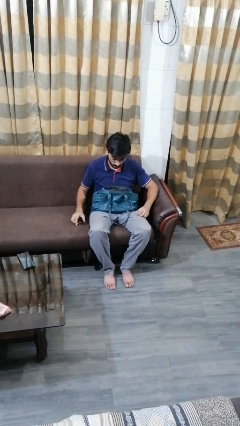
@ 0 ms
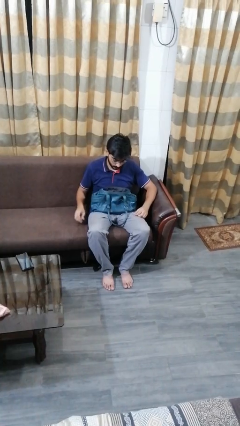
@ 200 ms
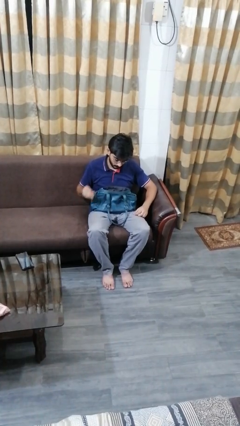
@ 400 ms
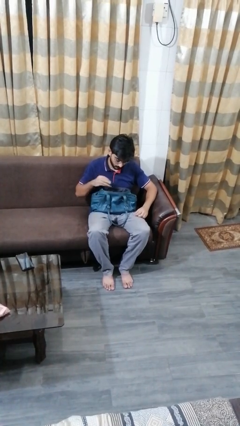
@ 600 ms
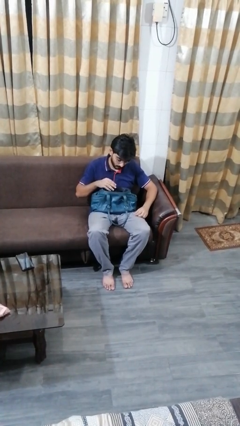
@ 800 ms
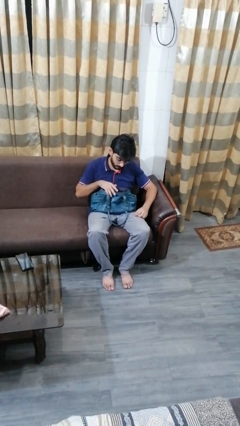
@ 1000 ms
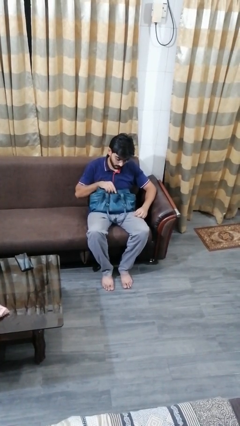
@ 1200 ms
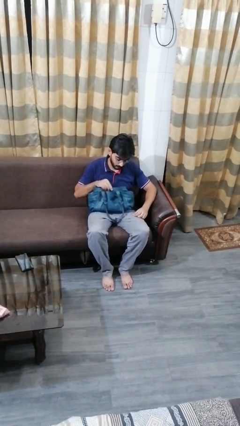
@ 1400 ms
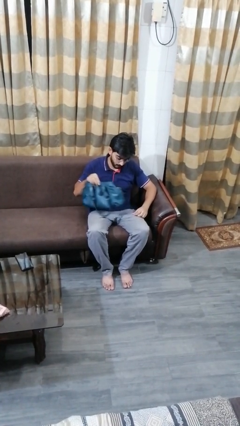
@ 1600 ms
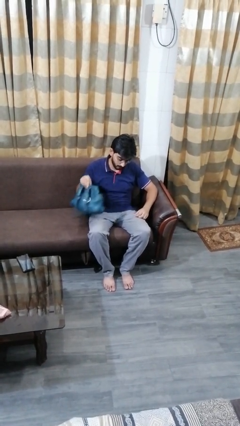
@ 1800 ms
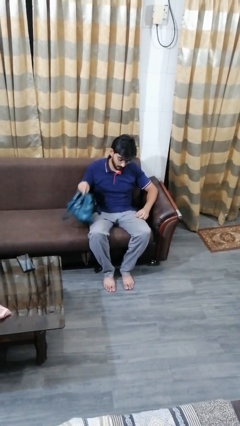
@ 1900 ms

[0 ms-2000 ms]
person puts object into purse

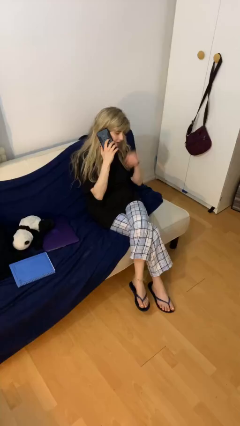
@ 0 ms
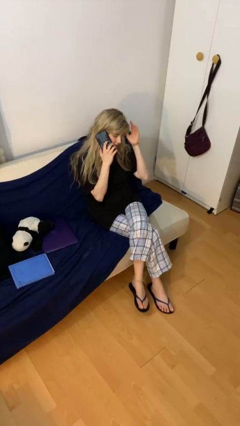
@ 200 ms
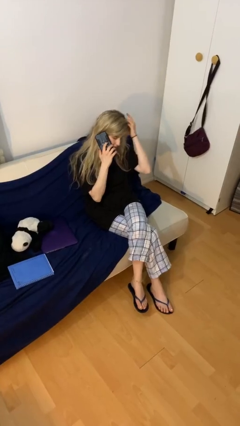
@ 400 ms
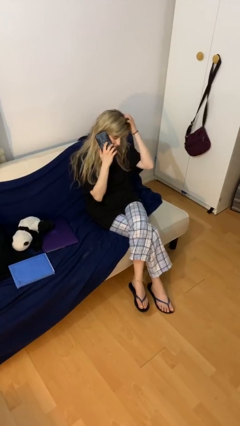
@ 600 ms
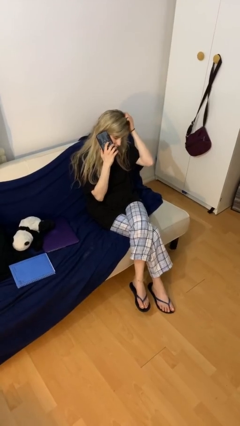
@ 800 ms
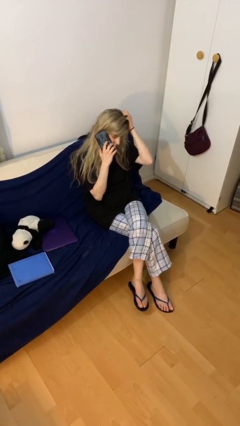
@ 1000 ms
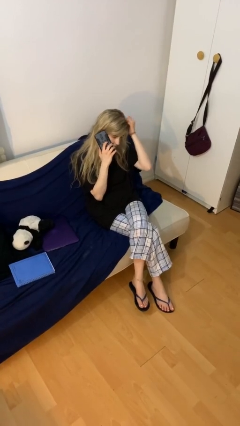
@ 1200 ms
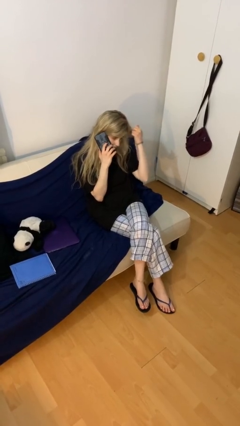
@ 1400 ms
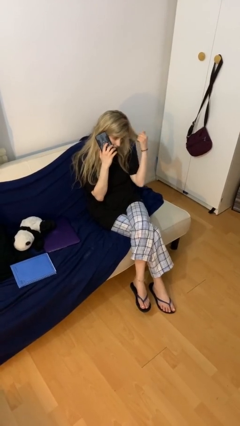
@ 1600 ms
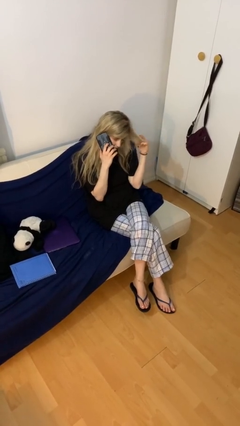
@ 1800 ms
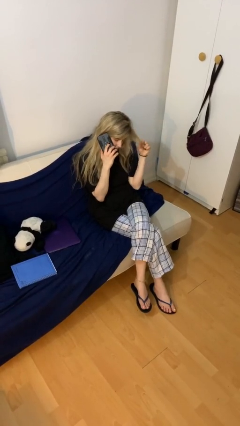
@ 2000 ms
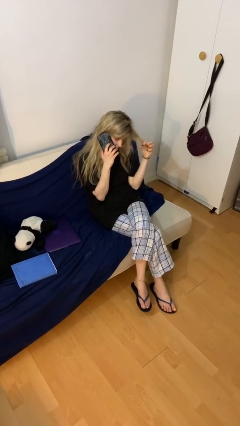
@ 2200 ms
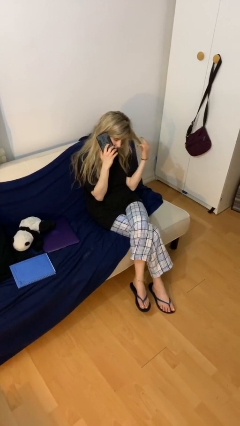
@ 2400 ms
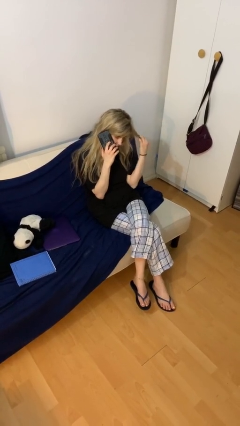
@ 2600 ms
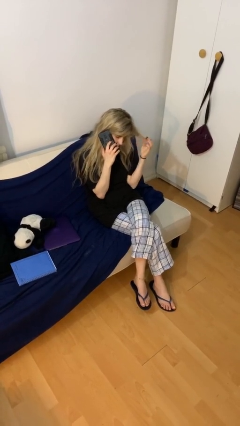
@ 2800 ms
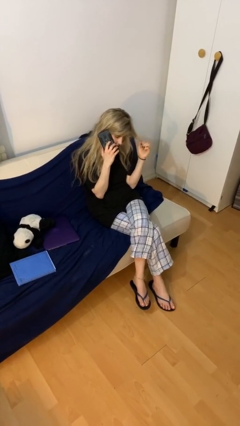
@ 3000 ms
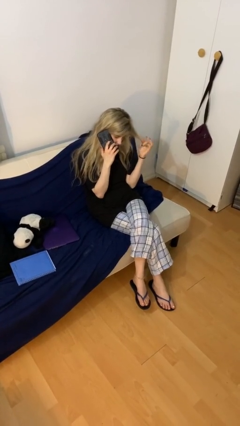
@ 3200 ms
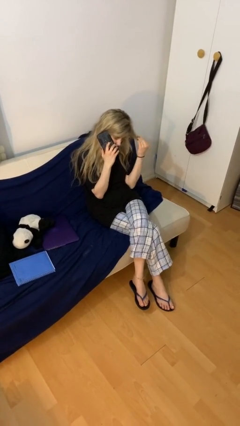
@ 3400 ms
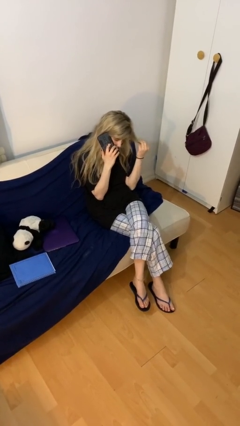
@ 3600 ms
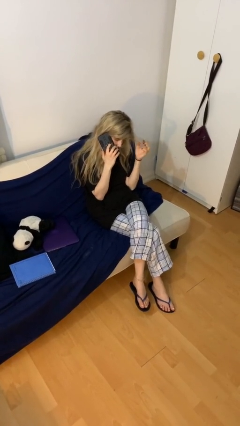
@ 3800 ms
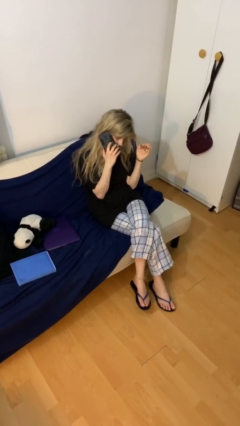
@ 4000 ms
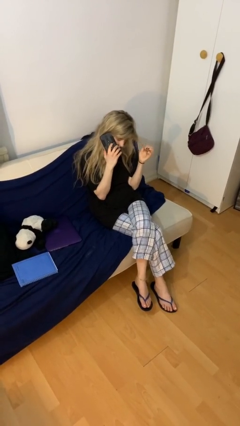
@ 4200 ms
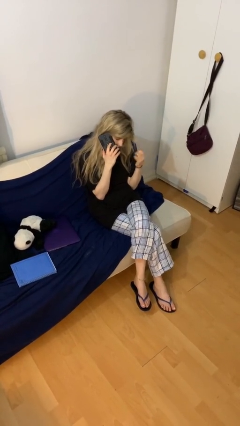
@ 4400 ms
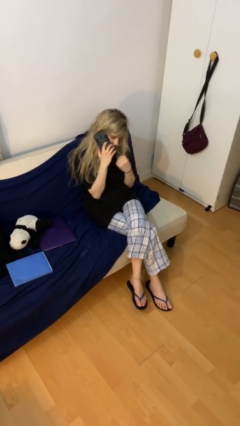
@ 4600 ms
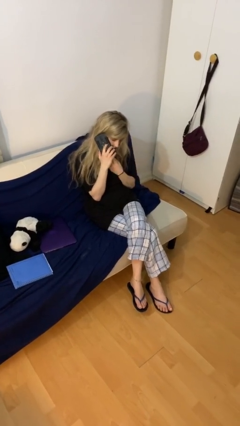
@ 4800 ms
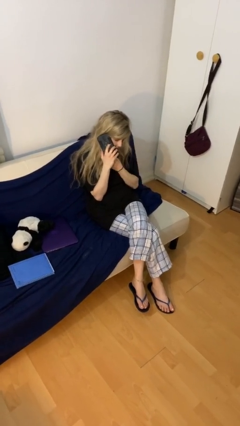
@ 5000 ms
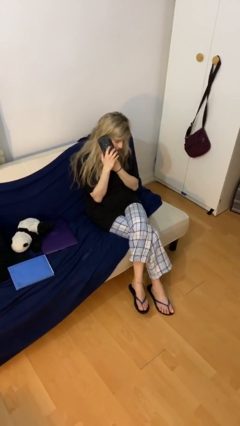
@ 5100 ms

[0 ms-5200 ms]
person talks on phone

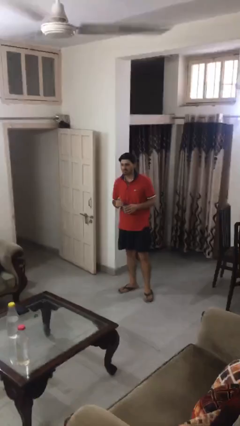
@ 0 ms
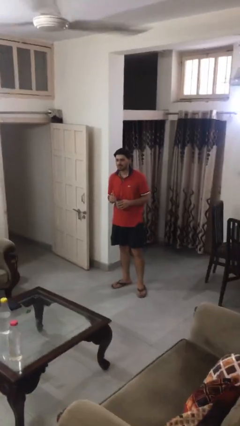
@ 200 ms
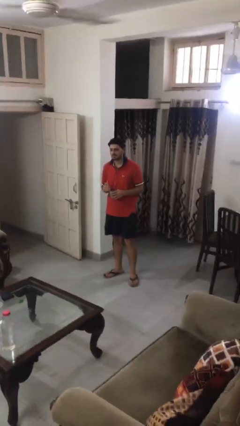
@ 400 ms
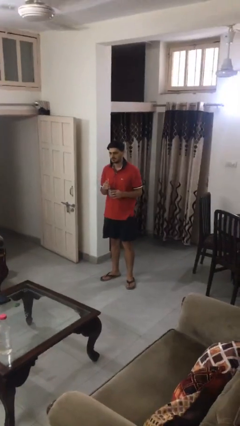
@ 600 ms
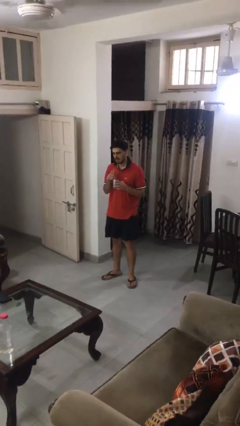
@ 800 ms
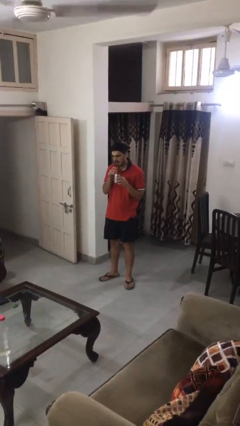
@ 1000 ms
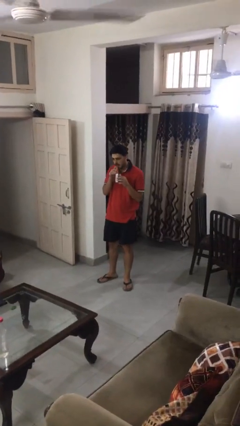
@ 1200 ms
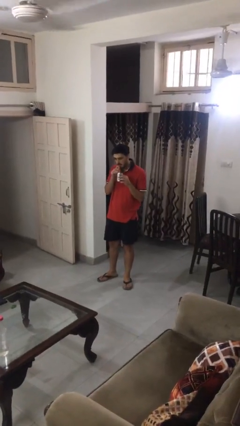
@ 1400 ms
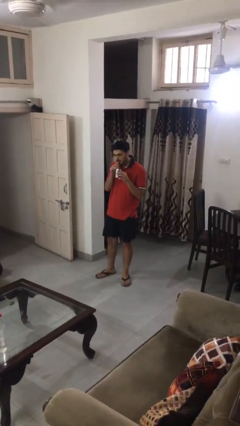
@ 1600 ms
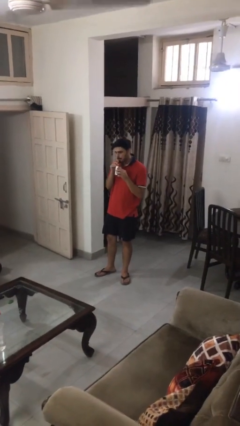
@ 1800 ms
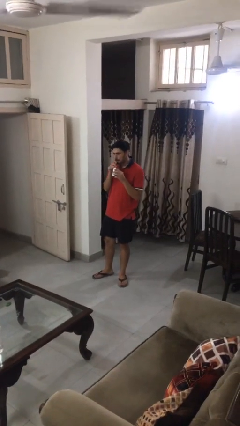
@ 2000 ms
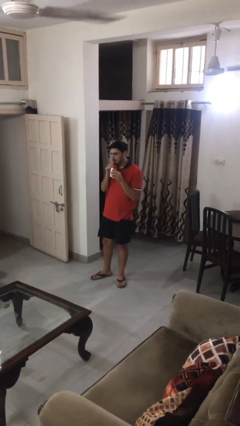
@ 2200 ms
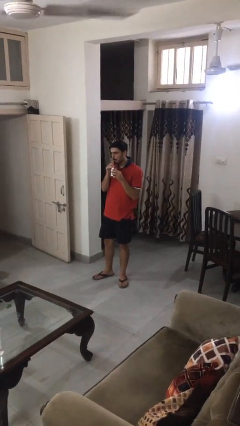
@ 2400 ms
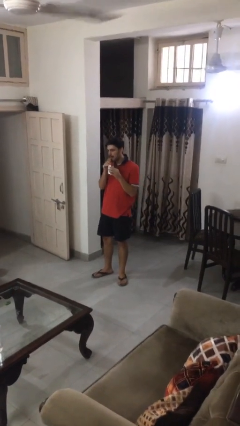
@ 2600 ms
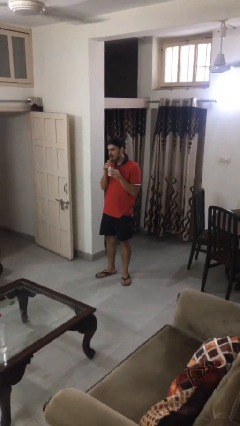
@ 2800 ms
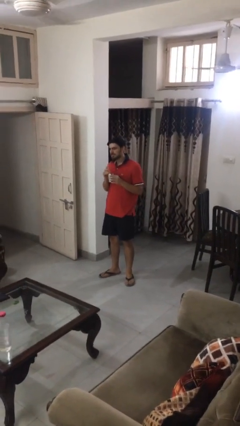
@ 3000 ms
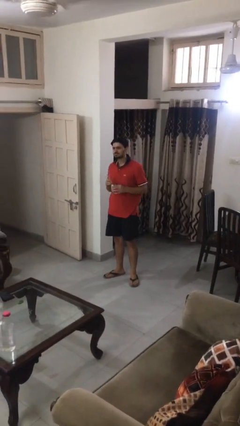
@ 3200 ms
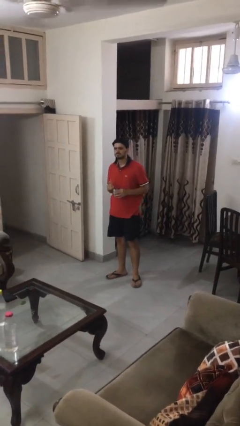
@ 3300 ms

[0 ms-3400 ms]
person drinks from straw

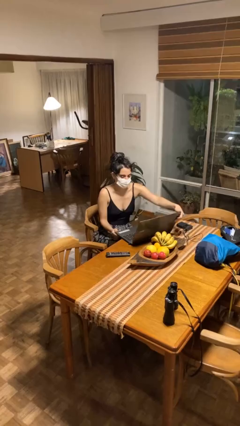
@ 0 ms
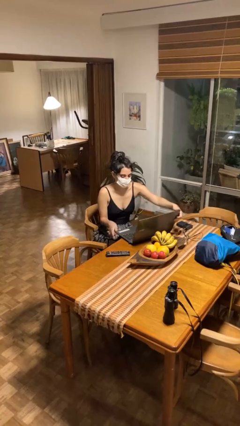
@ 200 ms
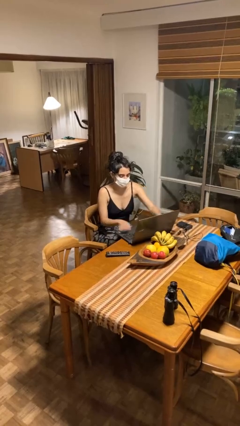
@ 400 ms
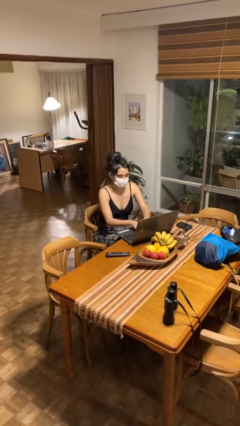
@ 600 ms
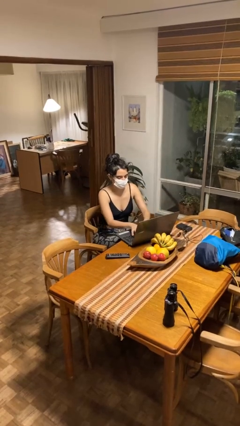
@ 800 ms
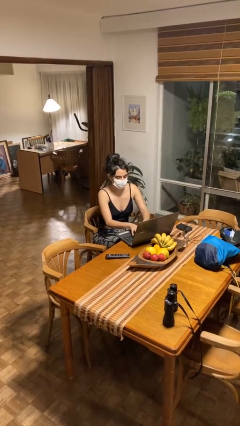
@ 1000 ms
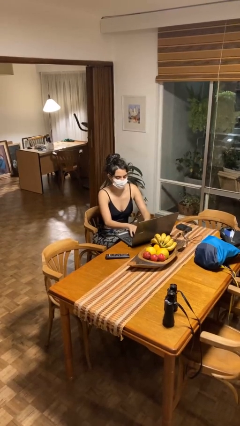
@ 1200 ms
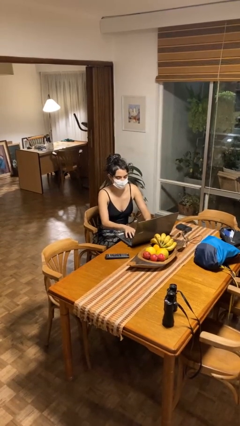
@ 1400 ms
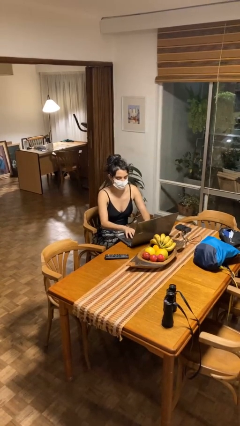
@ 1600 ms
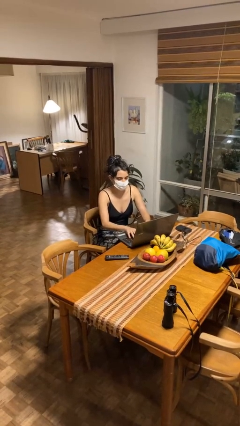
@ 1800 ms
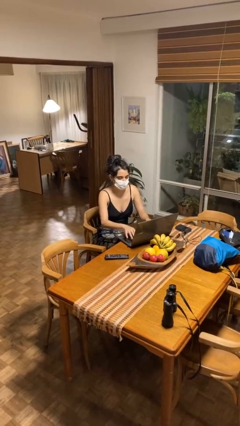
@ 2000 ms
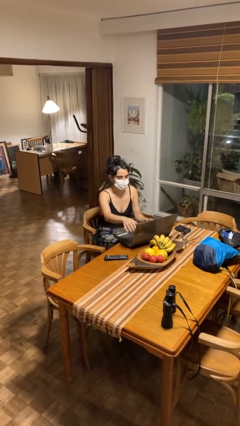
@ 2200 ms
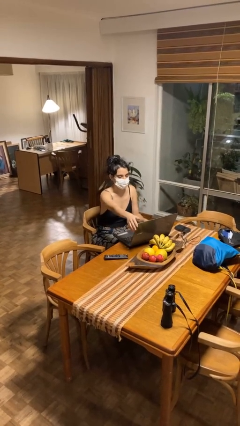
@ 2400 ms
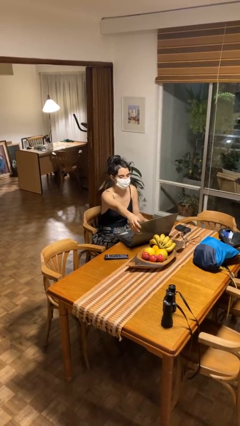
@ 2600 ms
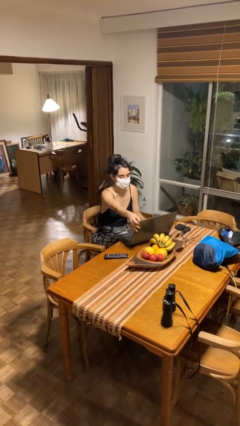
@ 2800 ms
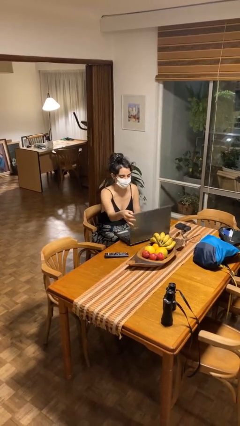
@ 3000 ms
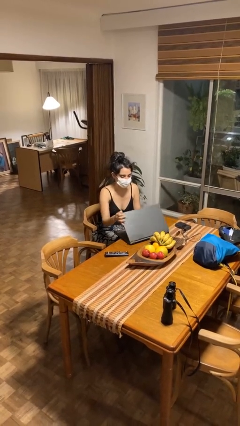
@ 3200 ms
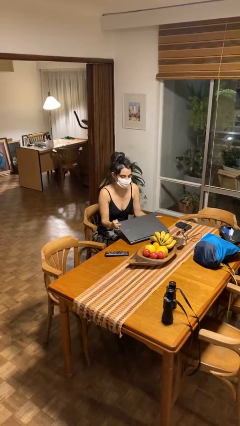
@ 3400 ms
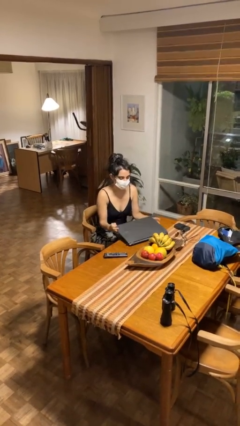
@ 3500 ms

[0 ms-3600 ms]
person interacts with laptop

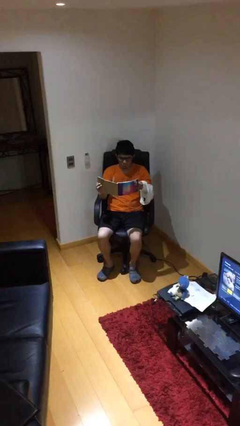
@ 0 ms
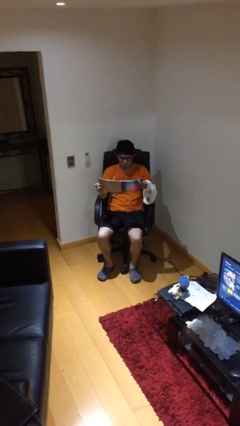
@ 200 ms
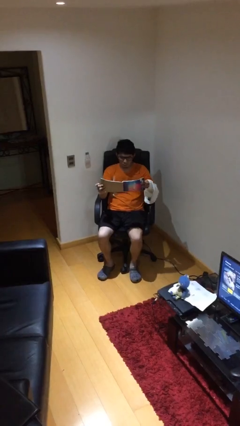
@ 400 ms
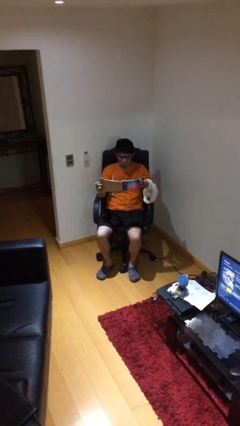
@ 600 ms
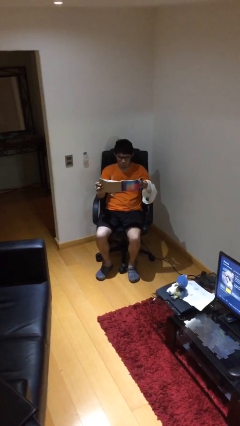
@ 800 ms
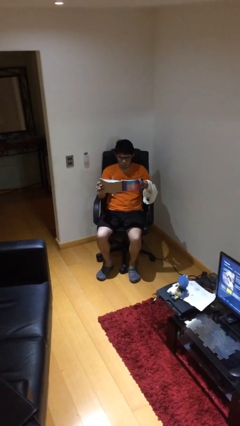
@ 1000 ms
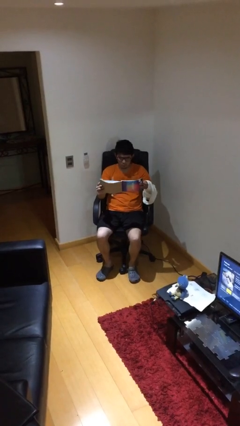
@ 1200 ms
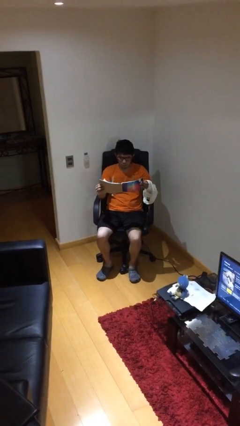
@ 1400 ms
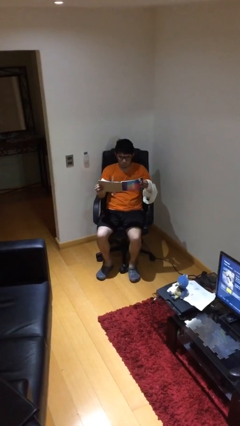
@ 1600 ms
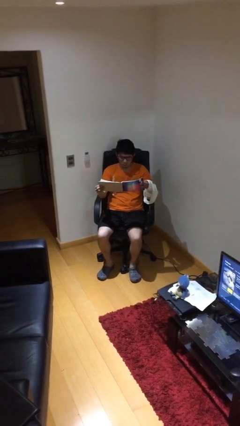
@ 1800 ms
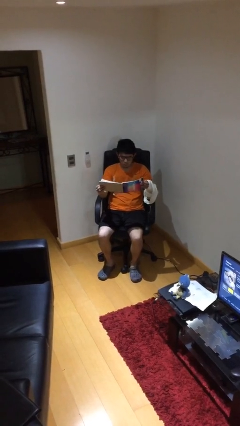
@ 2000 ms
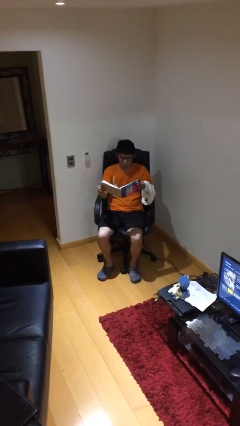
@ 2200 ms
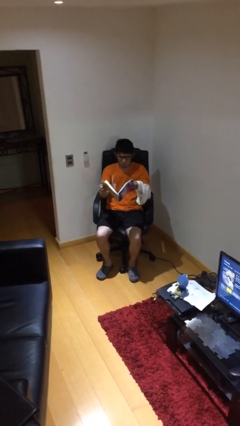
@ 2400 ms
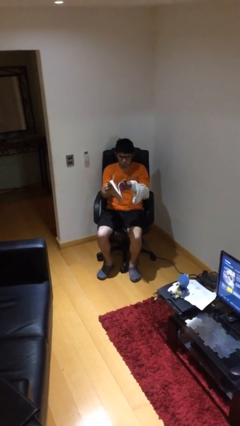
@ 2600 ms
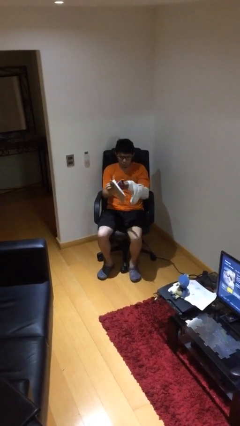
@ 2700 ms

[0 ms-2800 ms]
person reads document

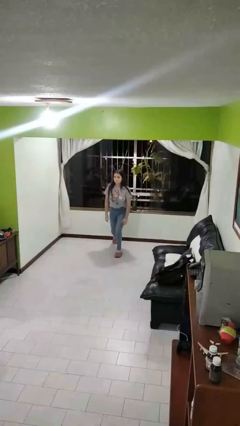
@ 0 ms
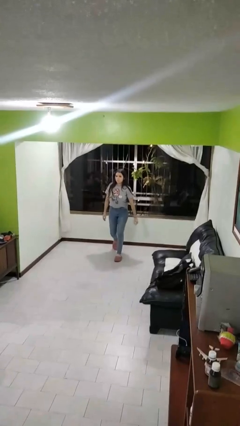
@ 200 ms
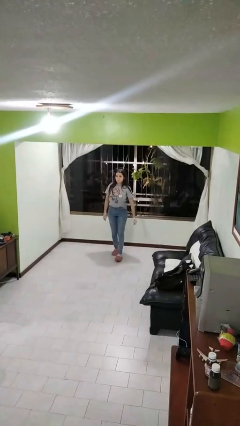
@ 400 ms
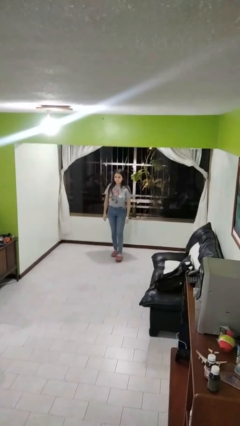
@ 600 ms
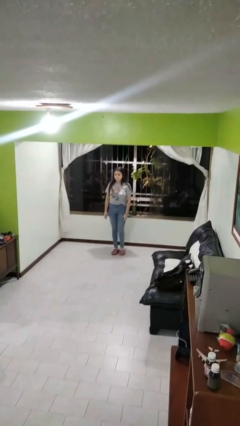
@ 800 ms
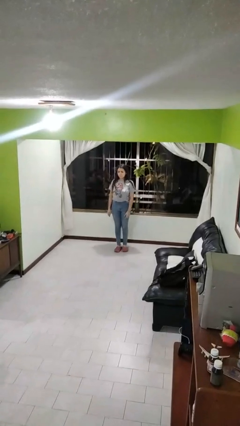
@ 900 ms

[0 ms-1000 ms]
person stands up from floor
